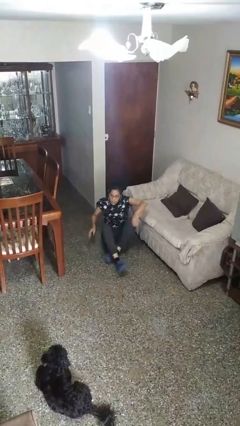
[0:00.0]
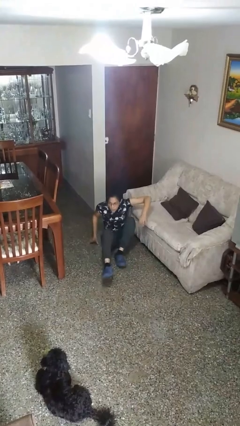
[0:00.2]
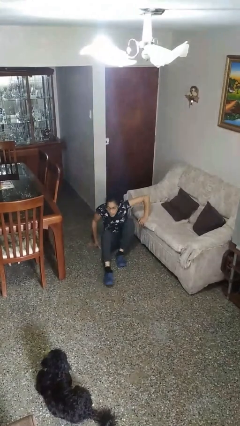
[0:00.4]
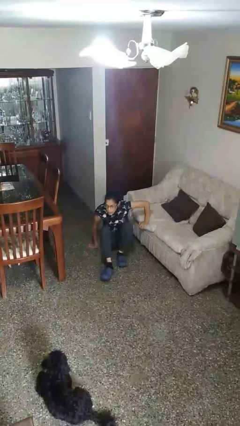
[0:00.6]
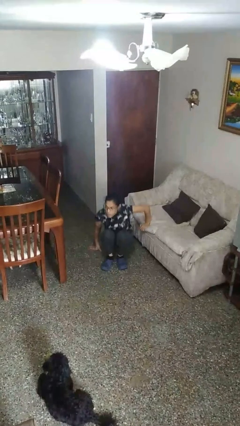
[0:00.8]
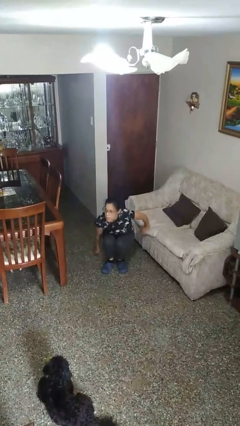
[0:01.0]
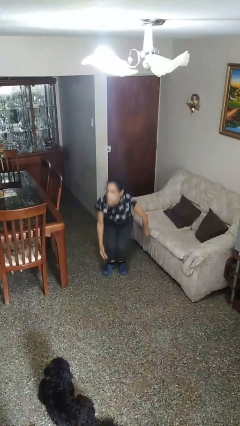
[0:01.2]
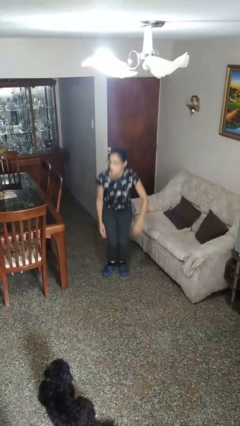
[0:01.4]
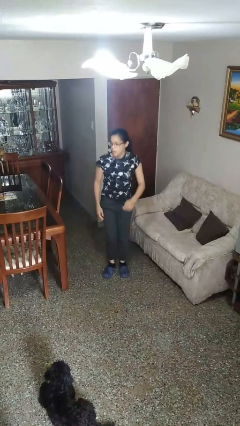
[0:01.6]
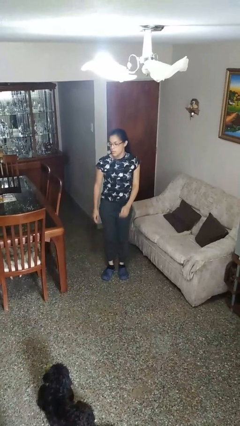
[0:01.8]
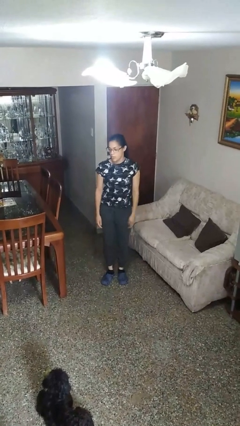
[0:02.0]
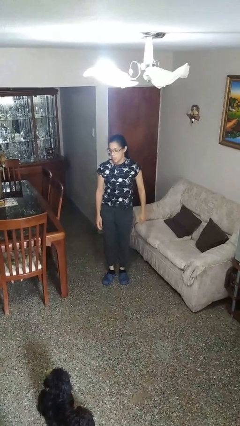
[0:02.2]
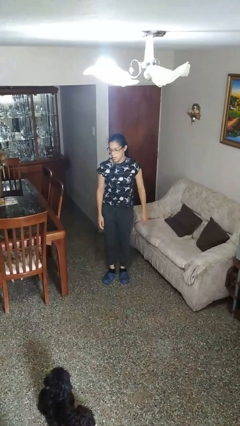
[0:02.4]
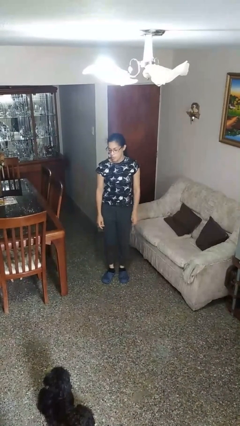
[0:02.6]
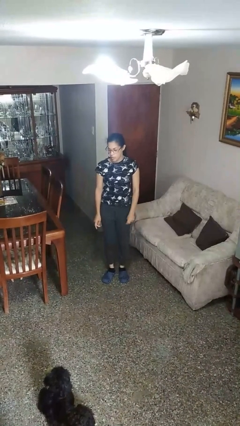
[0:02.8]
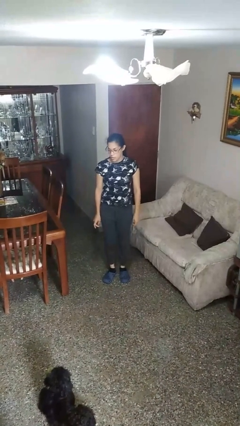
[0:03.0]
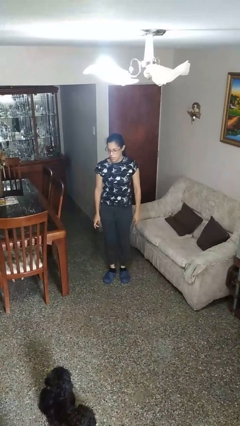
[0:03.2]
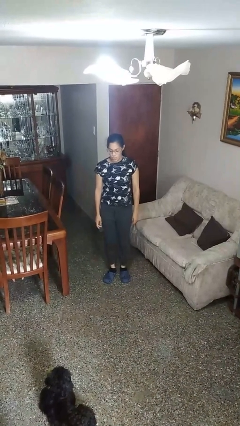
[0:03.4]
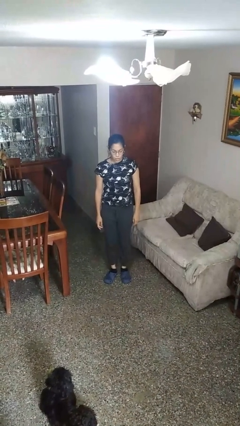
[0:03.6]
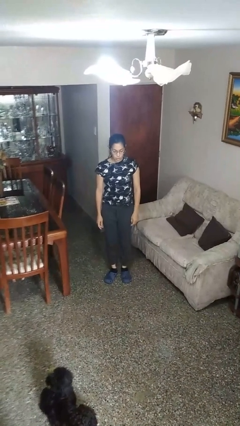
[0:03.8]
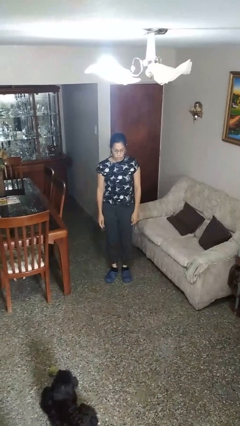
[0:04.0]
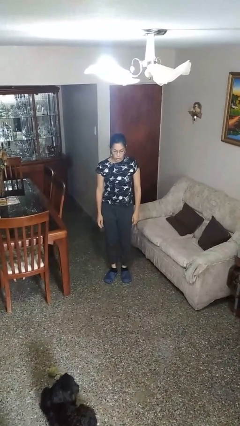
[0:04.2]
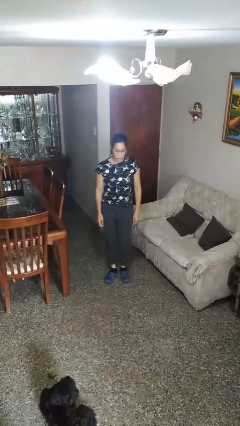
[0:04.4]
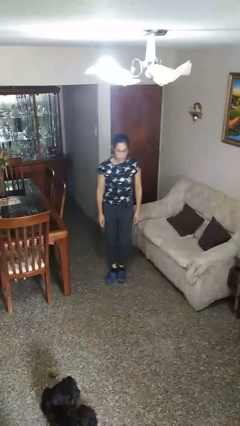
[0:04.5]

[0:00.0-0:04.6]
person stands up from floor

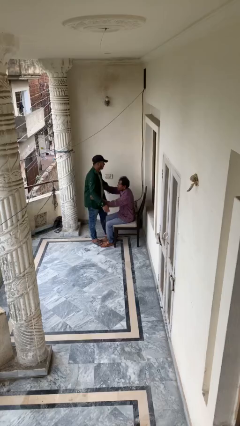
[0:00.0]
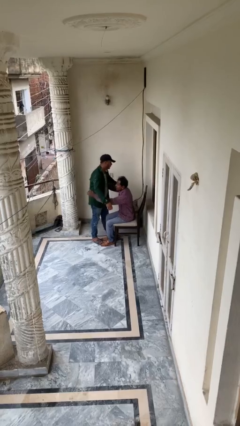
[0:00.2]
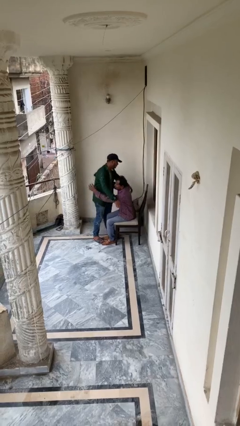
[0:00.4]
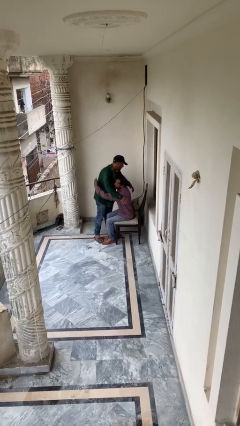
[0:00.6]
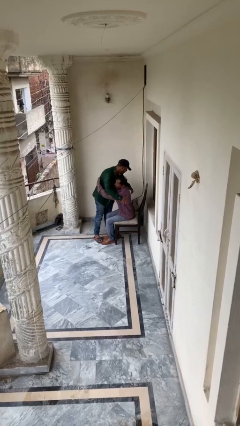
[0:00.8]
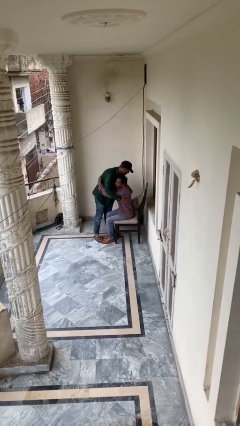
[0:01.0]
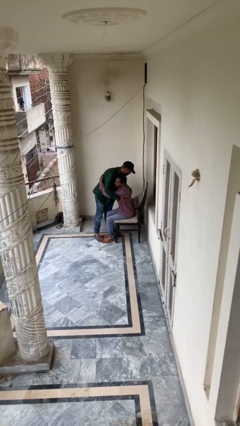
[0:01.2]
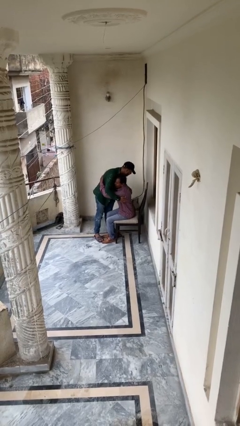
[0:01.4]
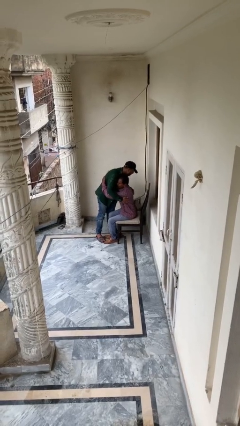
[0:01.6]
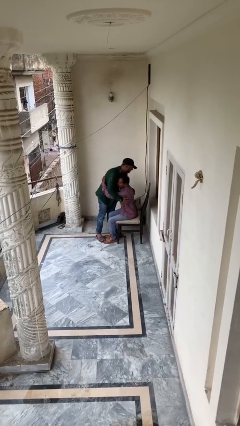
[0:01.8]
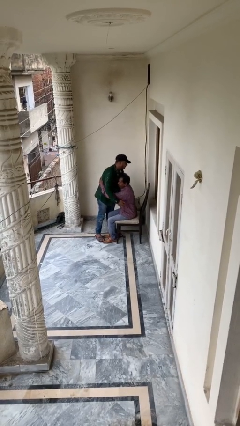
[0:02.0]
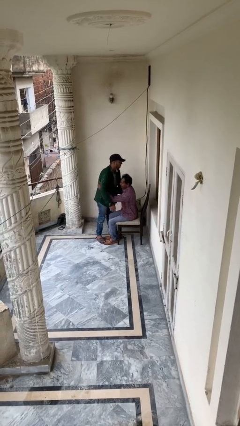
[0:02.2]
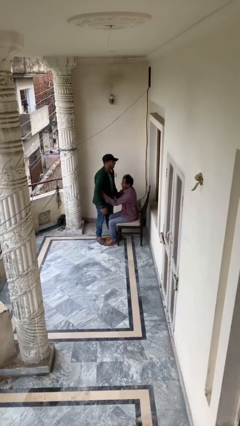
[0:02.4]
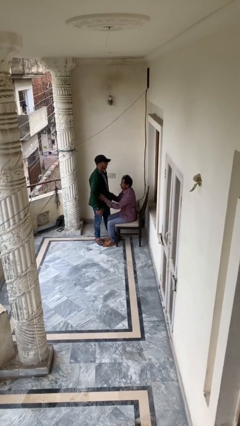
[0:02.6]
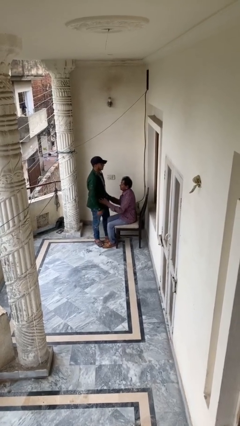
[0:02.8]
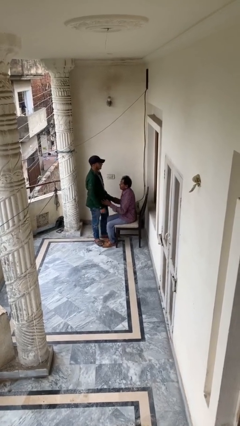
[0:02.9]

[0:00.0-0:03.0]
person embraces person

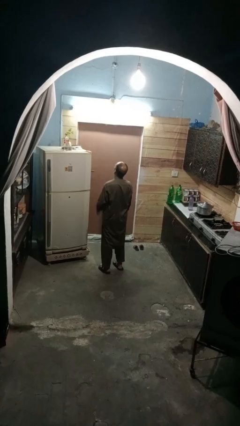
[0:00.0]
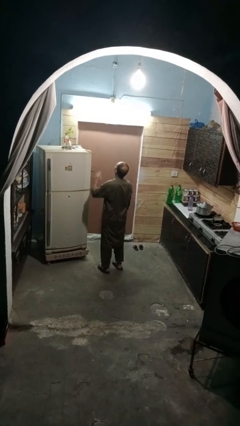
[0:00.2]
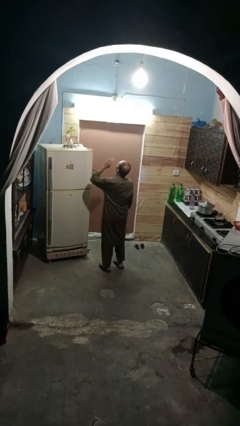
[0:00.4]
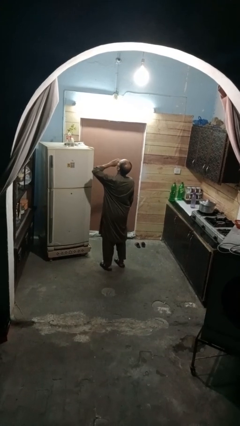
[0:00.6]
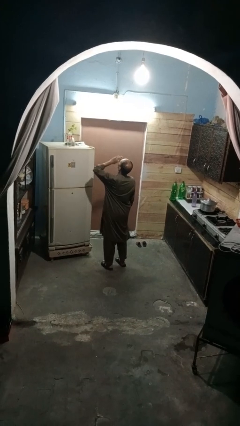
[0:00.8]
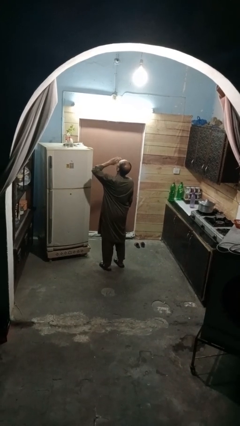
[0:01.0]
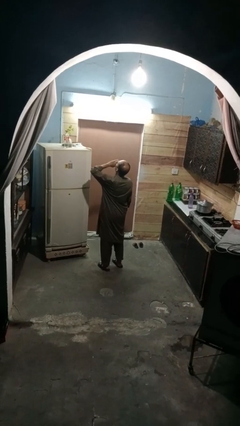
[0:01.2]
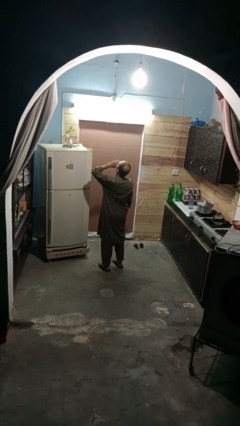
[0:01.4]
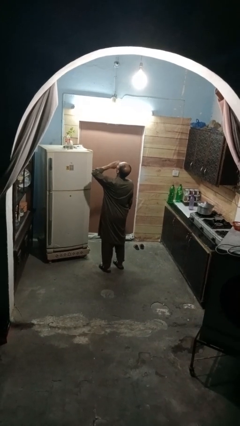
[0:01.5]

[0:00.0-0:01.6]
person yawns

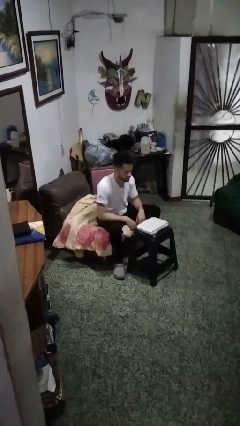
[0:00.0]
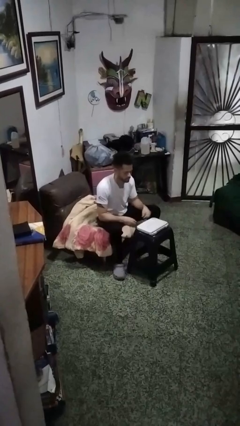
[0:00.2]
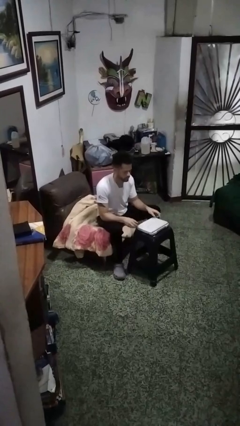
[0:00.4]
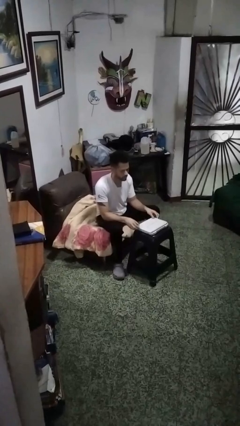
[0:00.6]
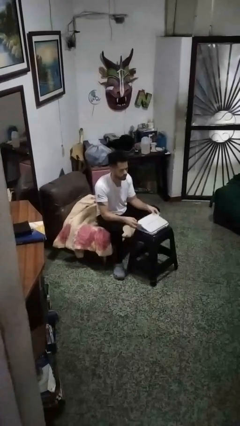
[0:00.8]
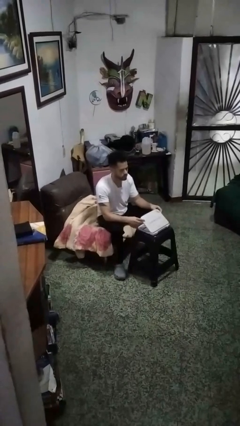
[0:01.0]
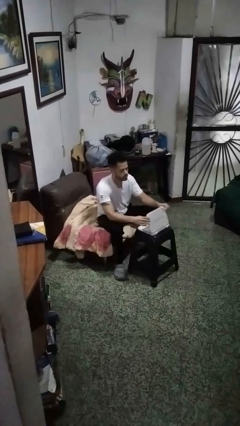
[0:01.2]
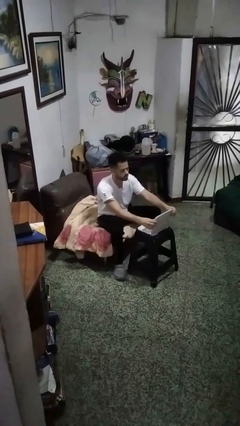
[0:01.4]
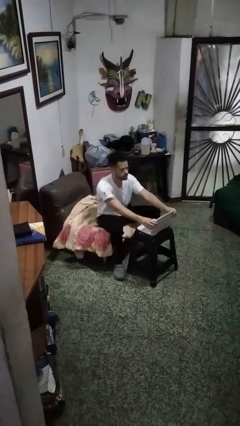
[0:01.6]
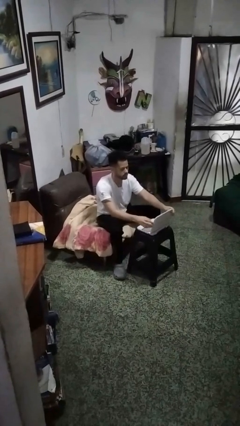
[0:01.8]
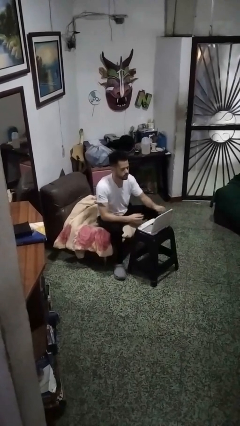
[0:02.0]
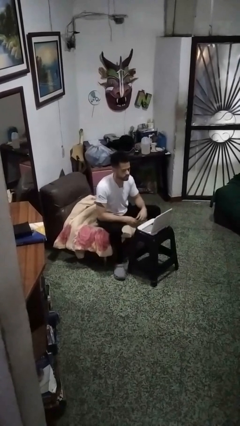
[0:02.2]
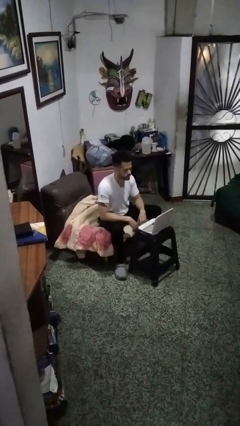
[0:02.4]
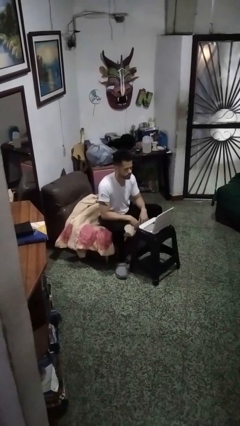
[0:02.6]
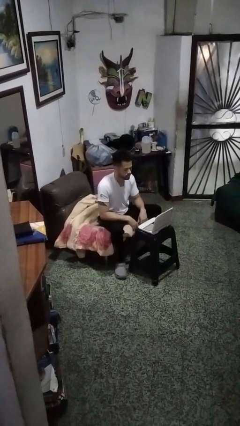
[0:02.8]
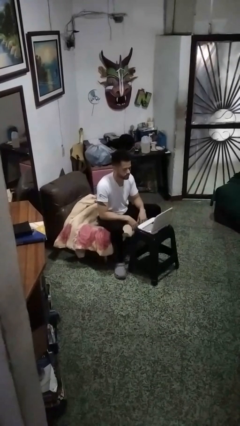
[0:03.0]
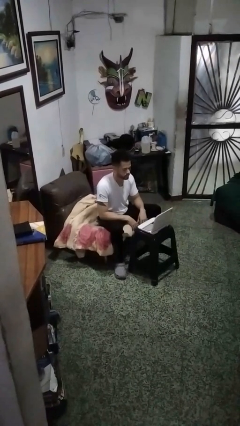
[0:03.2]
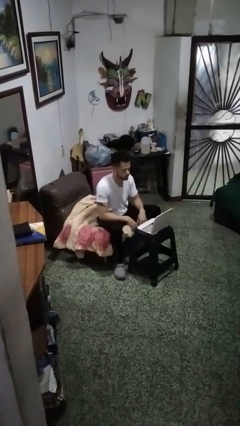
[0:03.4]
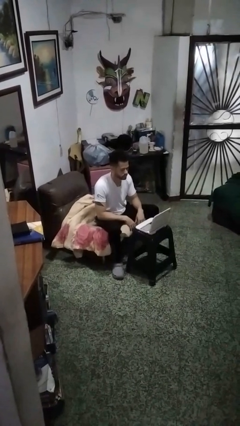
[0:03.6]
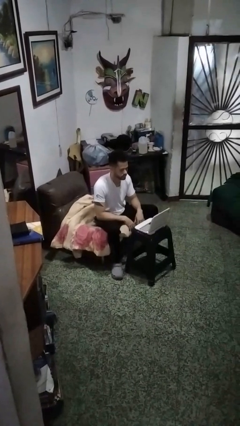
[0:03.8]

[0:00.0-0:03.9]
person opens laptop

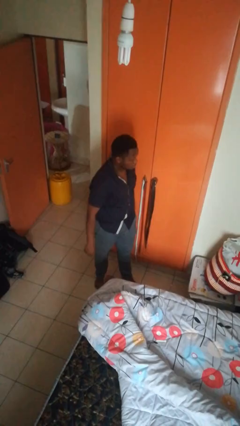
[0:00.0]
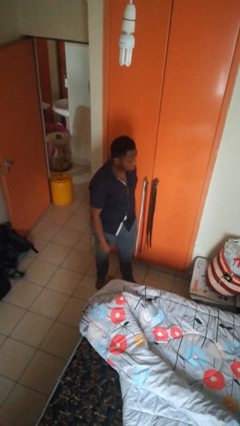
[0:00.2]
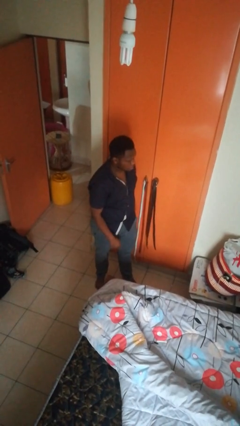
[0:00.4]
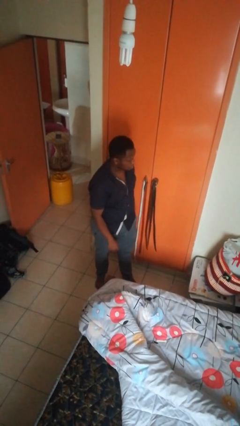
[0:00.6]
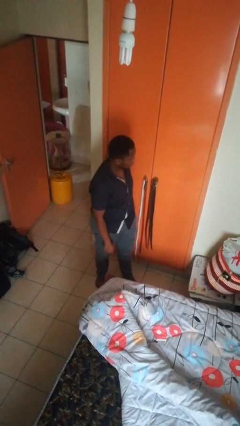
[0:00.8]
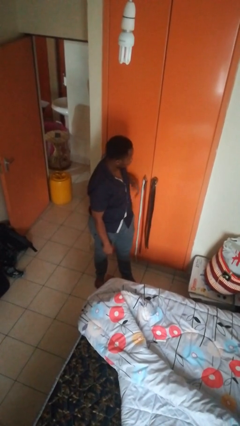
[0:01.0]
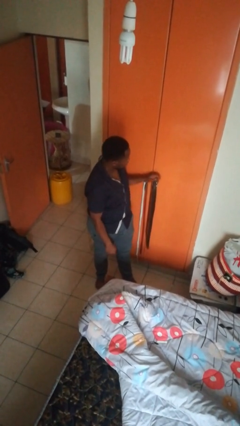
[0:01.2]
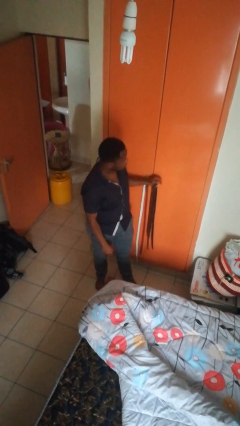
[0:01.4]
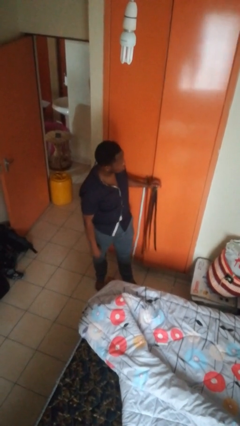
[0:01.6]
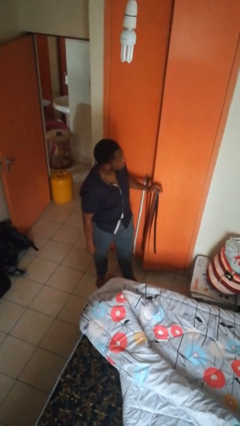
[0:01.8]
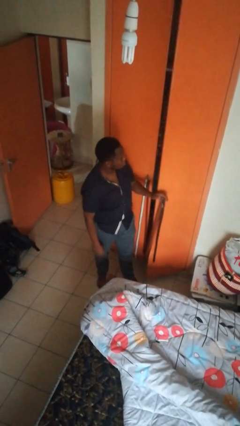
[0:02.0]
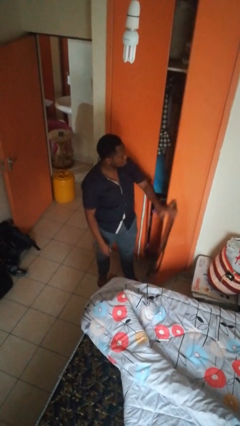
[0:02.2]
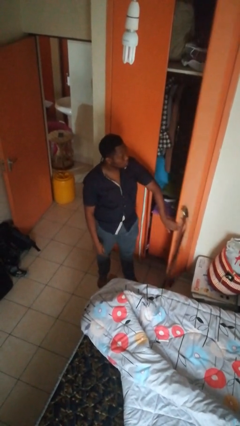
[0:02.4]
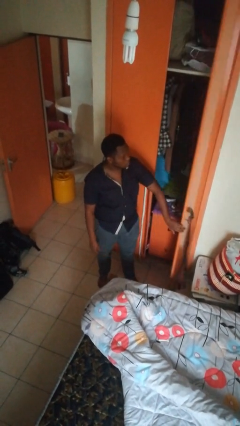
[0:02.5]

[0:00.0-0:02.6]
person opens closet door

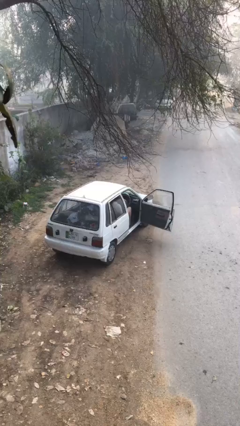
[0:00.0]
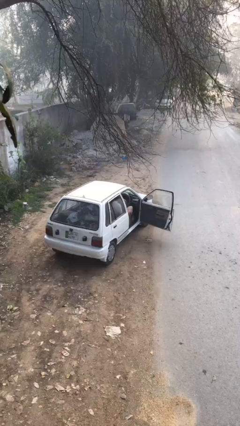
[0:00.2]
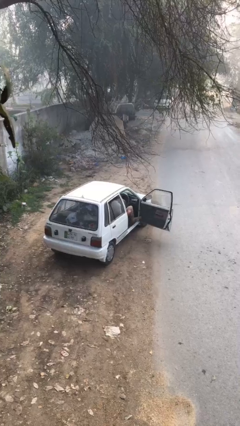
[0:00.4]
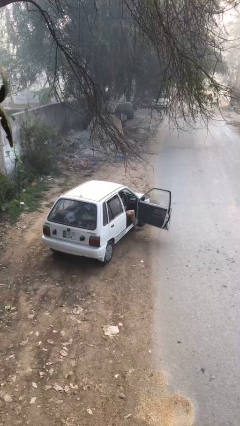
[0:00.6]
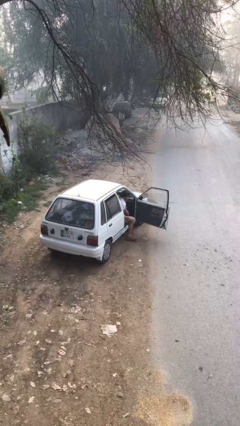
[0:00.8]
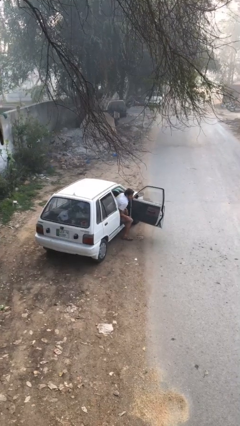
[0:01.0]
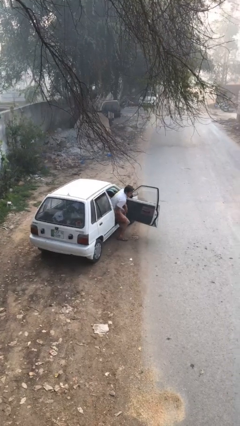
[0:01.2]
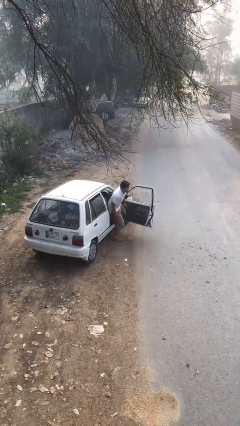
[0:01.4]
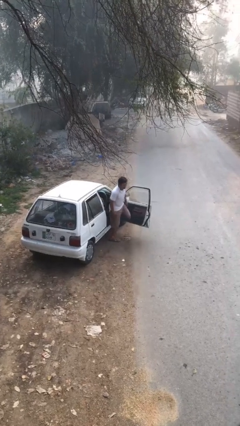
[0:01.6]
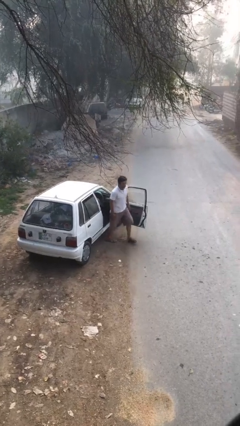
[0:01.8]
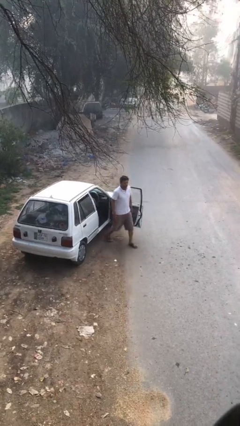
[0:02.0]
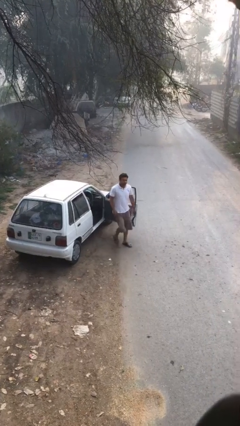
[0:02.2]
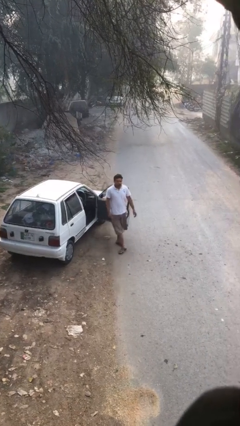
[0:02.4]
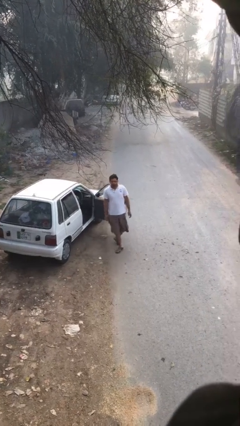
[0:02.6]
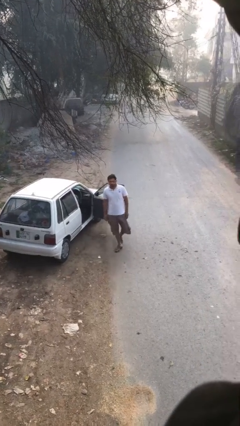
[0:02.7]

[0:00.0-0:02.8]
person exits car
